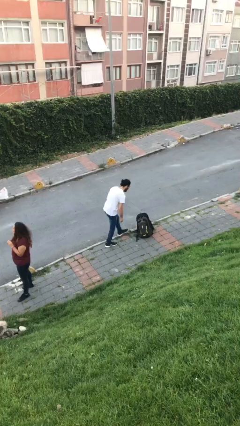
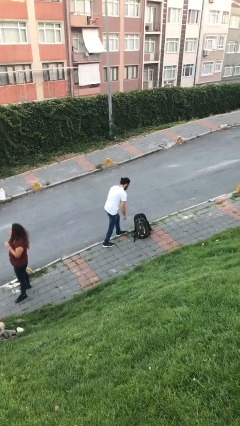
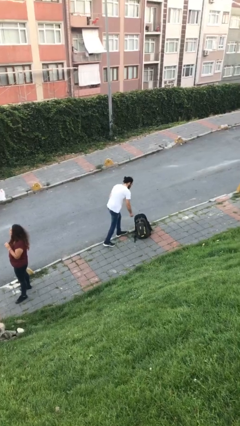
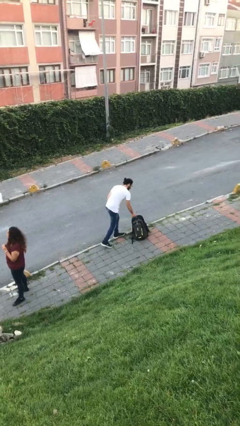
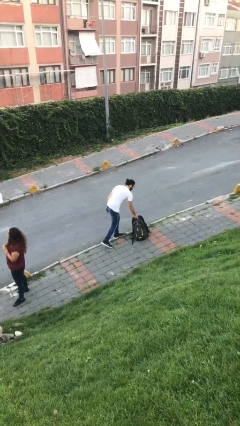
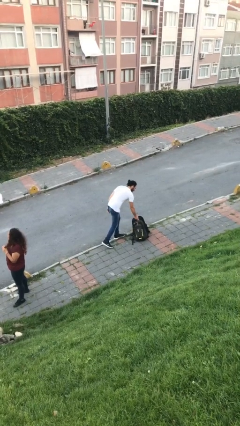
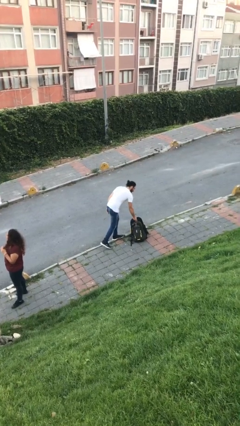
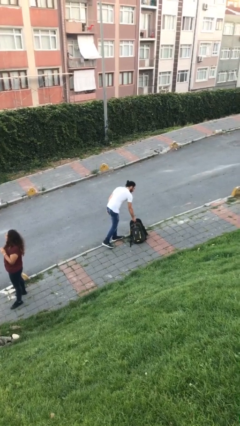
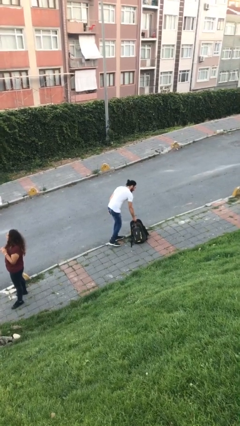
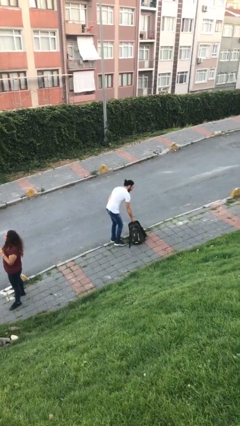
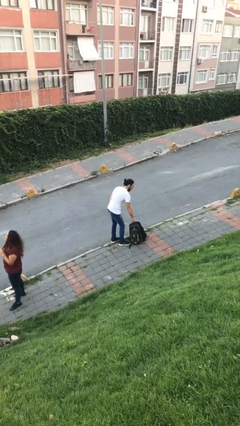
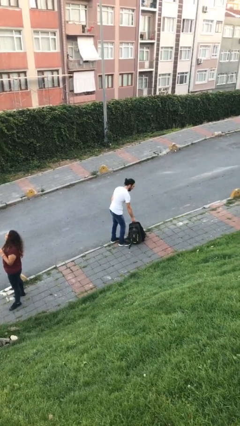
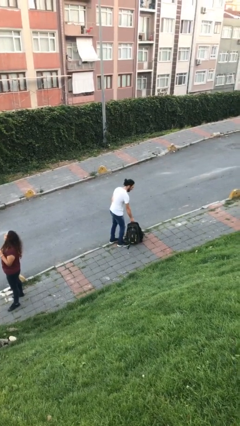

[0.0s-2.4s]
person picks up object from floor

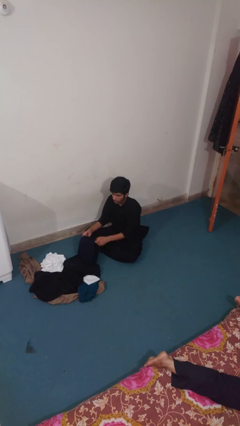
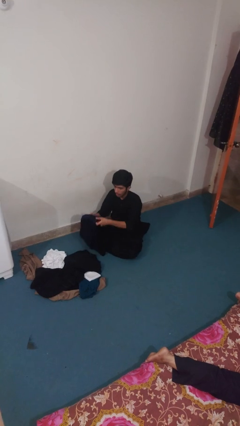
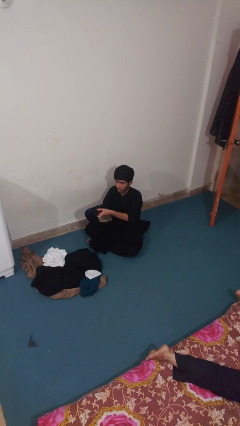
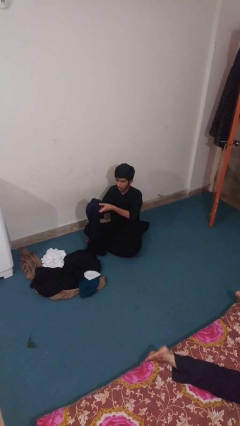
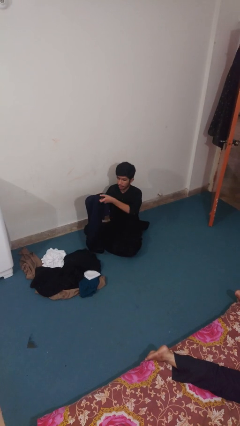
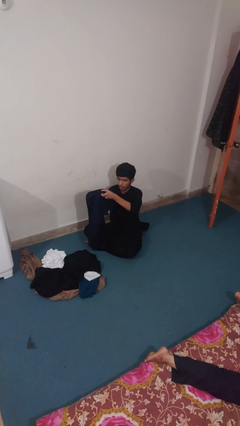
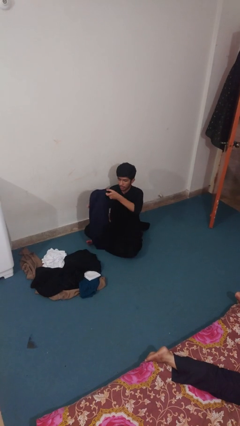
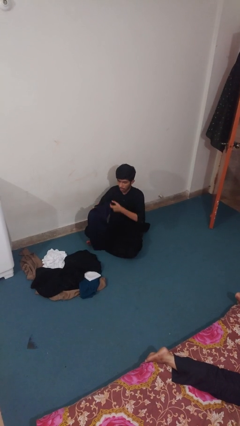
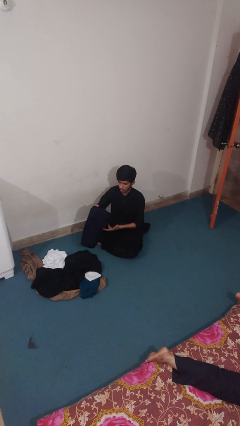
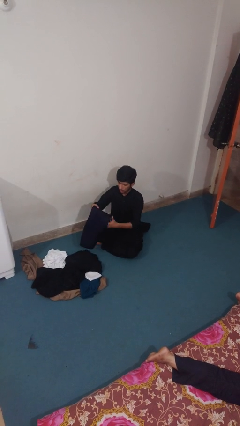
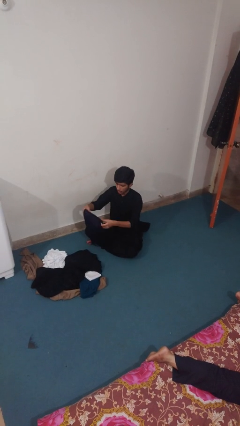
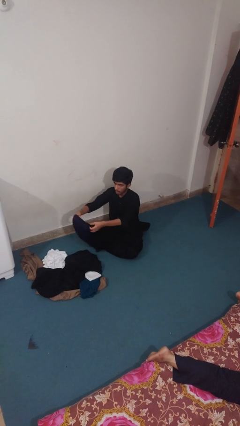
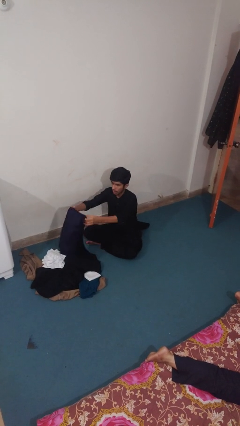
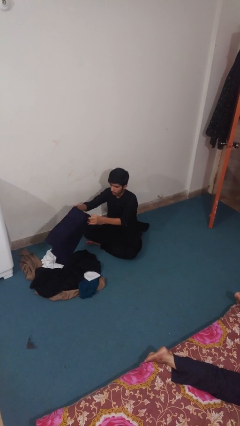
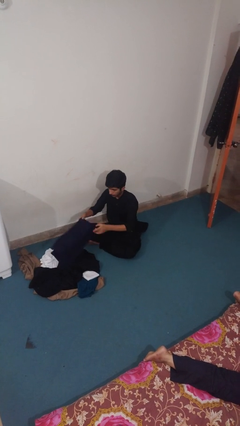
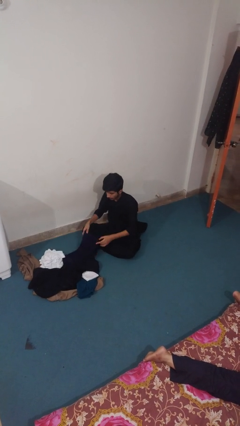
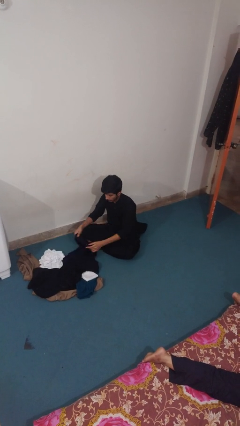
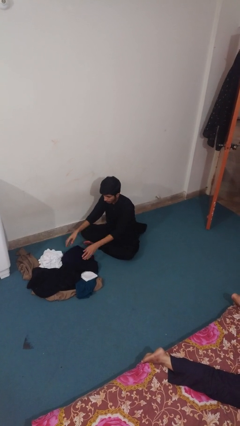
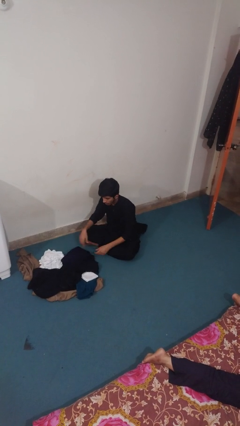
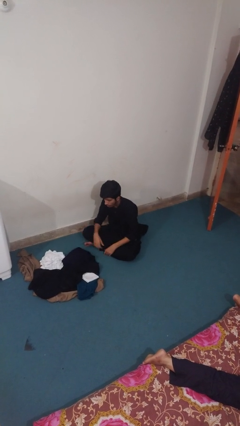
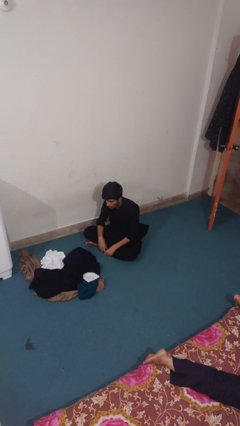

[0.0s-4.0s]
person folds pants

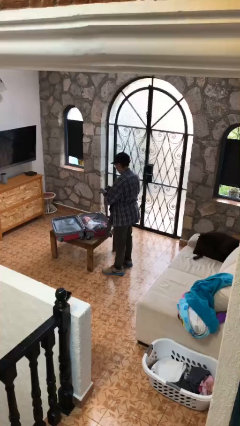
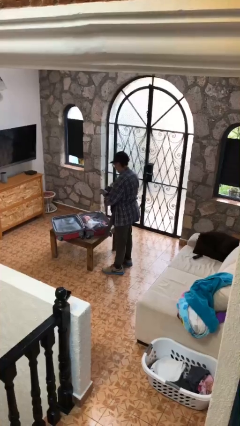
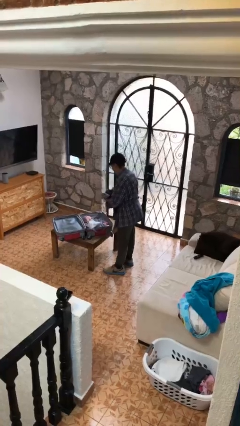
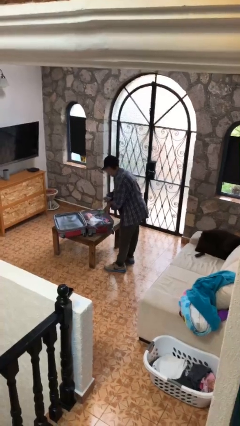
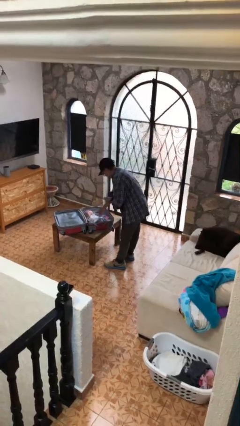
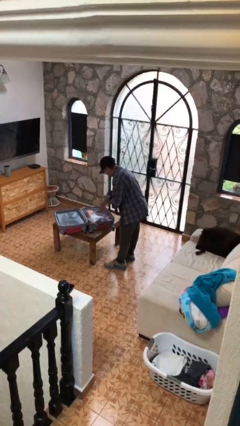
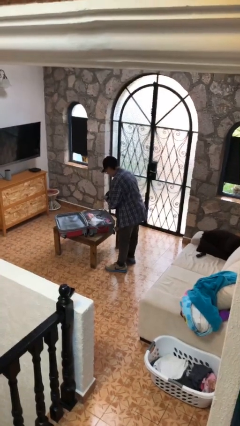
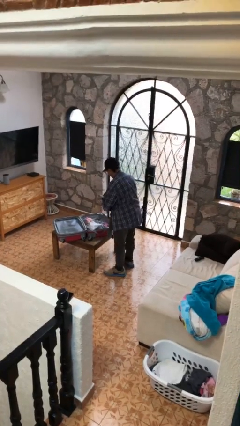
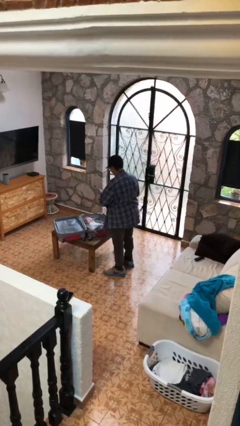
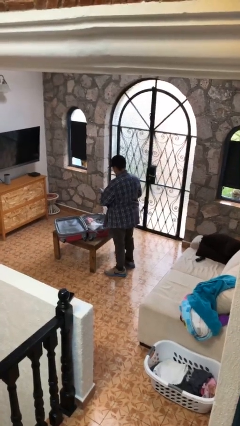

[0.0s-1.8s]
person loads clothes into suitcase

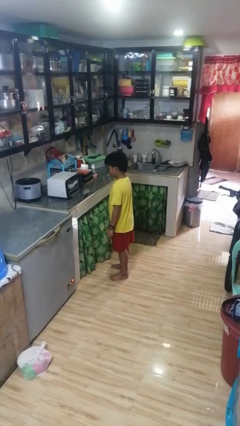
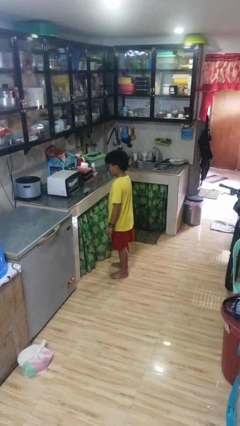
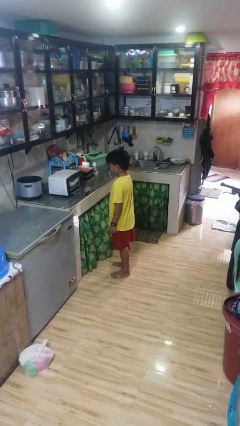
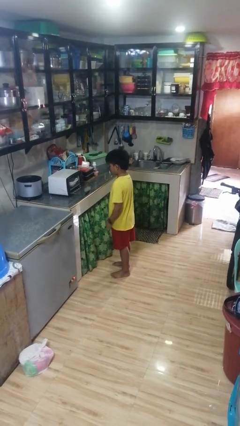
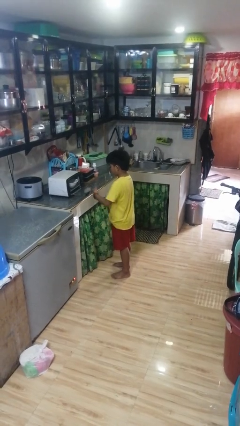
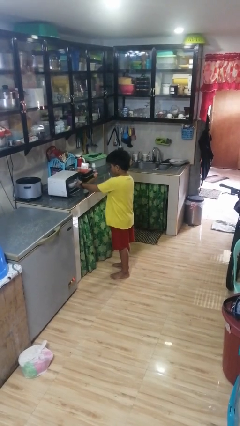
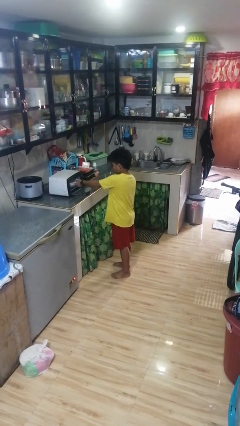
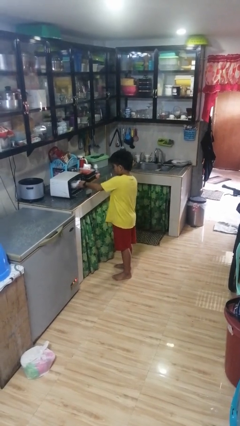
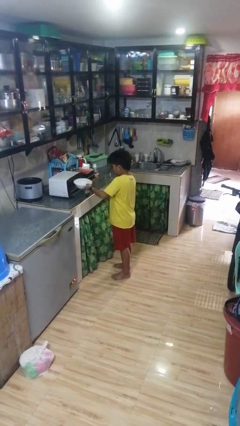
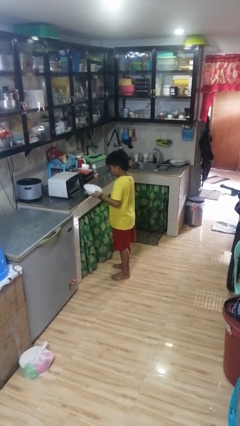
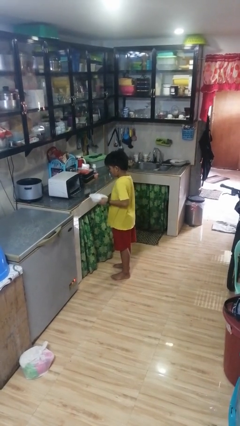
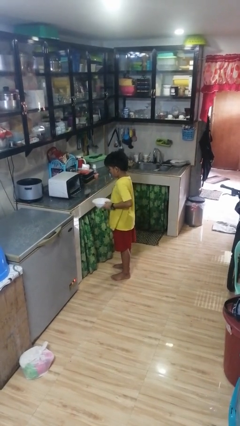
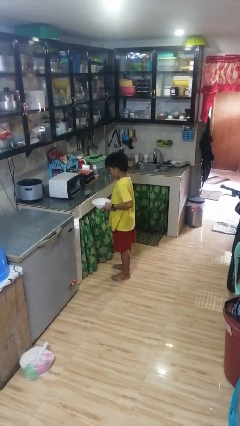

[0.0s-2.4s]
person takes object from microwave

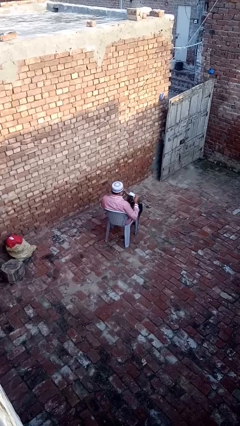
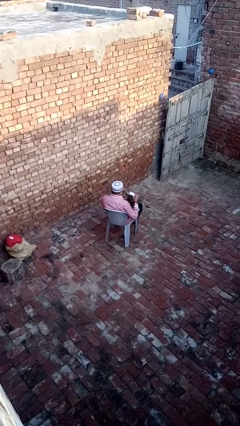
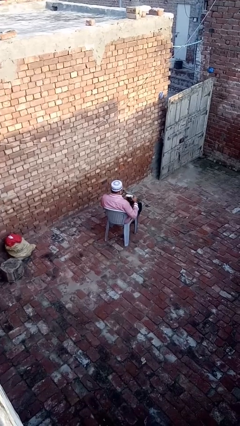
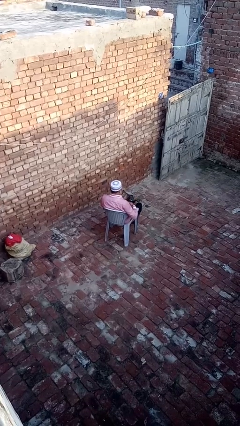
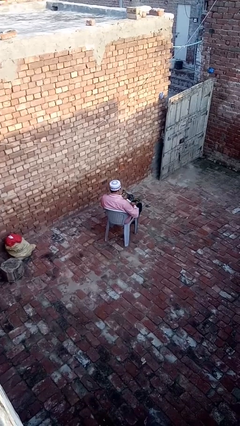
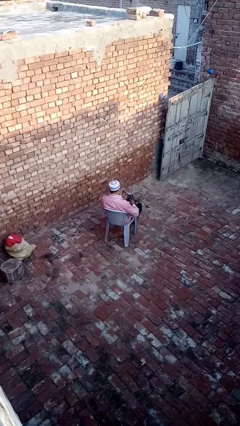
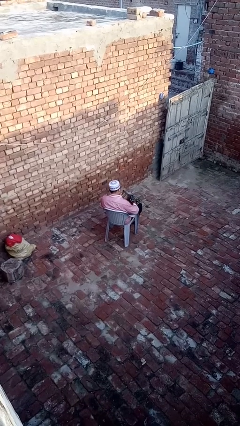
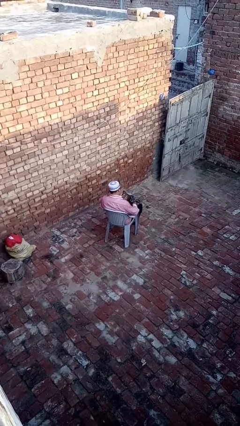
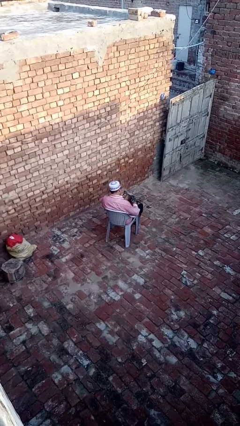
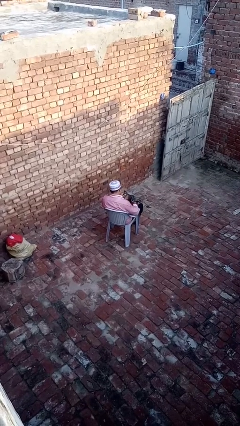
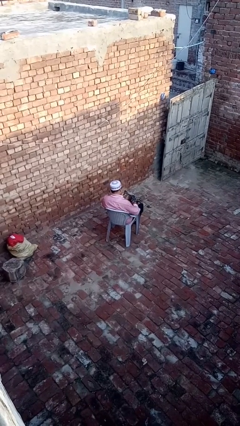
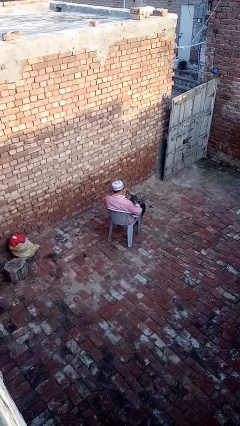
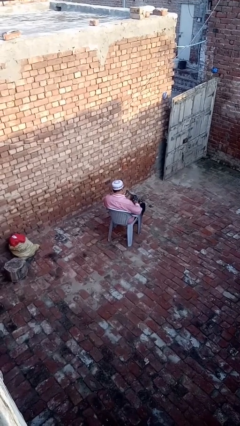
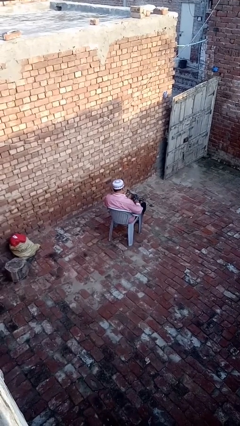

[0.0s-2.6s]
person puts object into purse

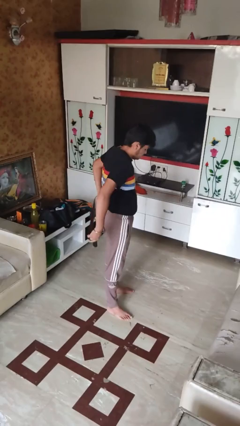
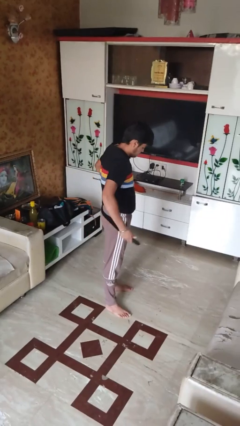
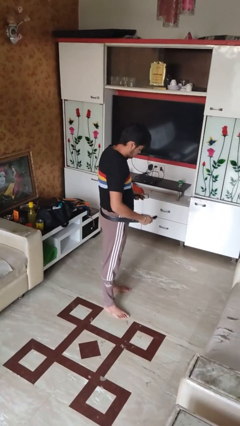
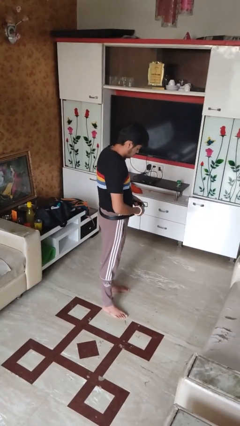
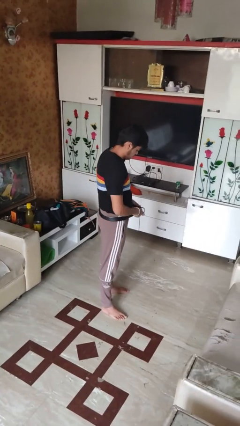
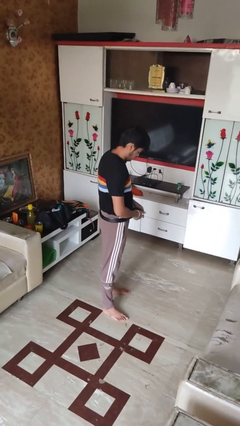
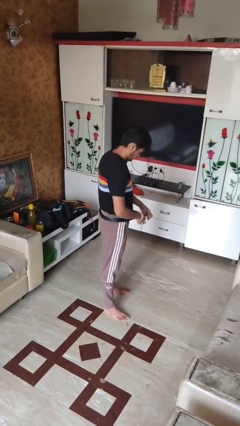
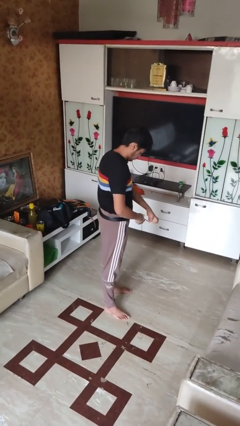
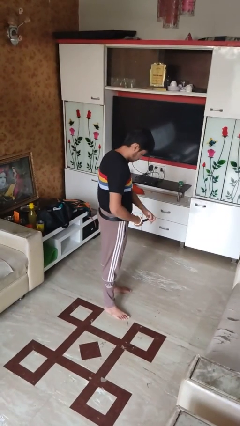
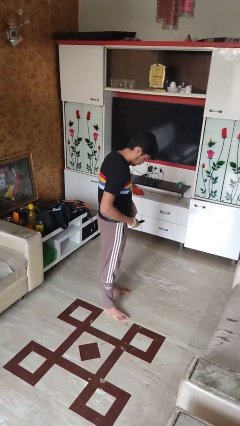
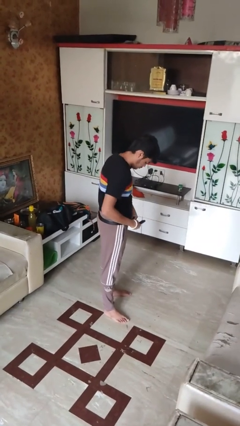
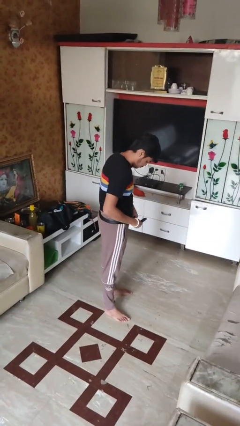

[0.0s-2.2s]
person puts on belt

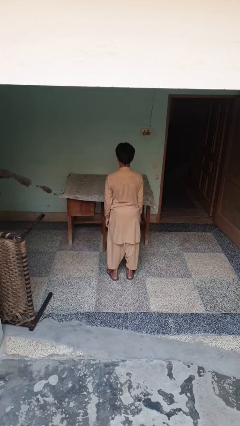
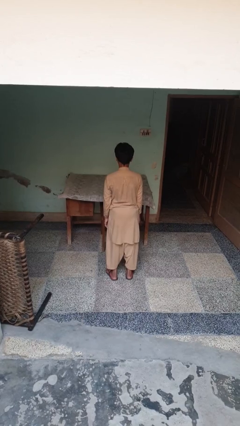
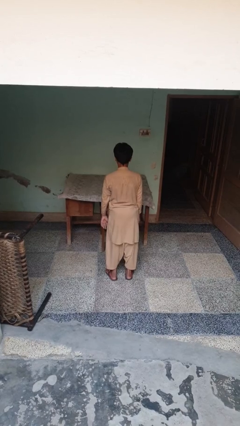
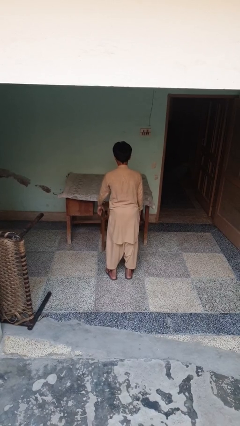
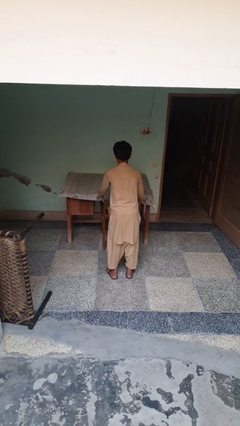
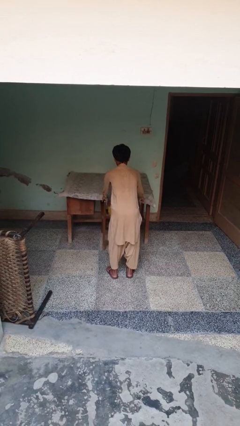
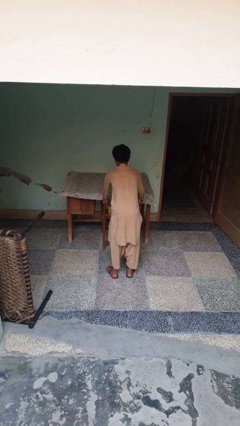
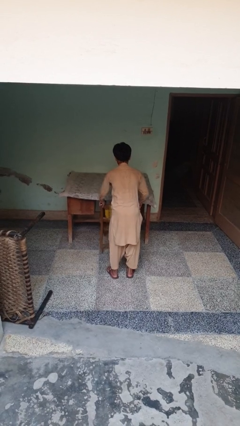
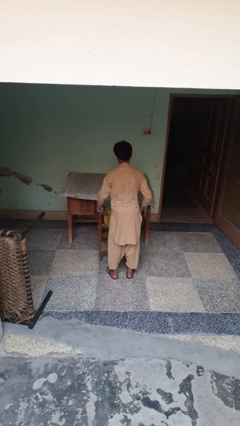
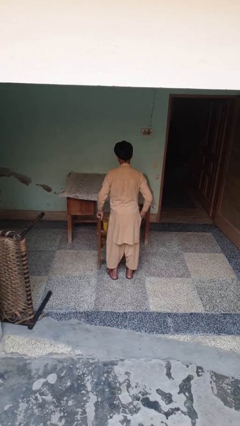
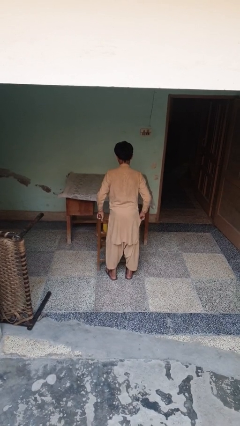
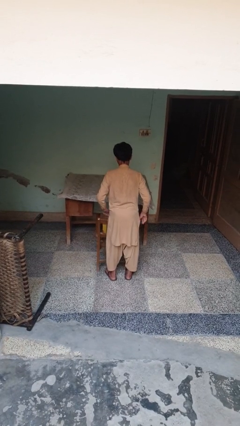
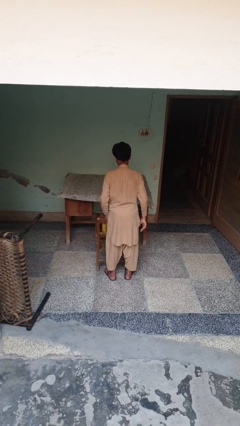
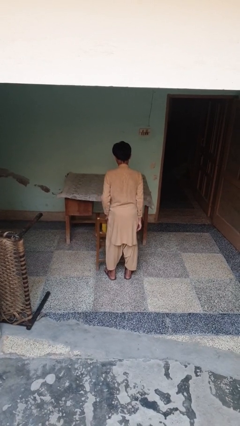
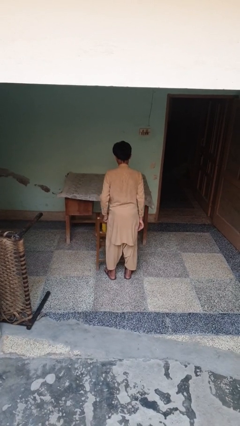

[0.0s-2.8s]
person pulls out chair
